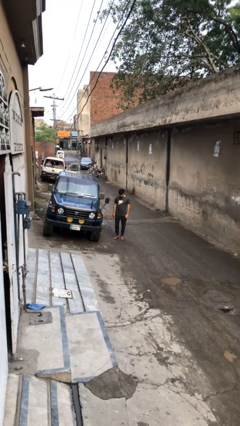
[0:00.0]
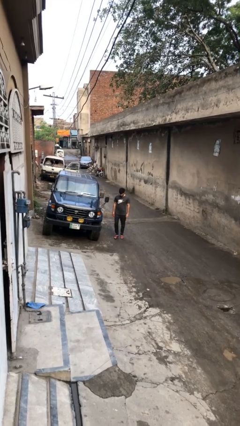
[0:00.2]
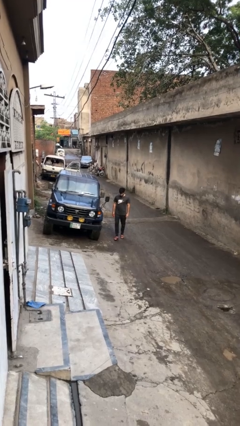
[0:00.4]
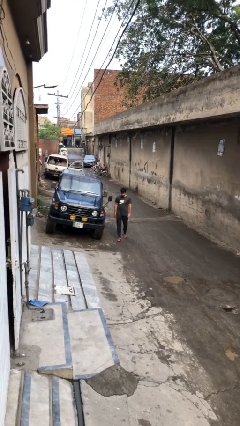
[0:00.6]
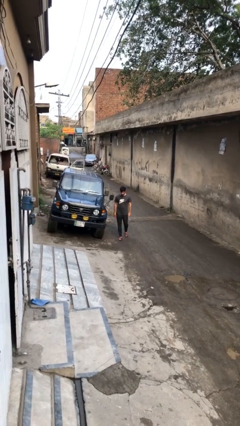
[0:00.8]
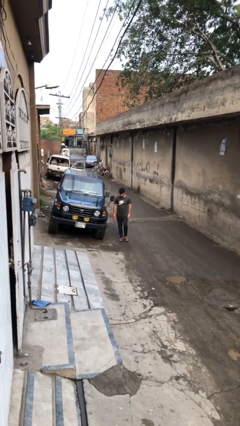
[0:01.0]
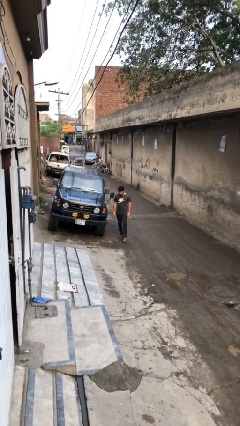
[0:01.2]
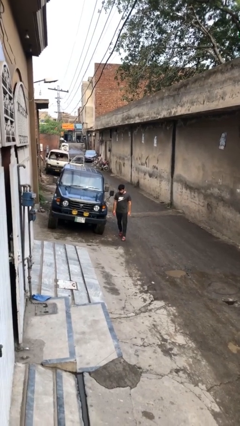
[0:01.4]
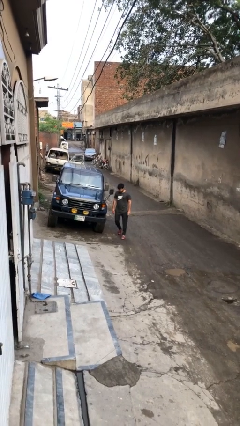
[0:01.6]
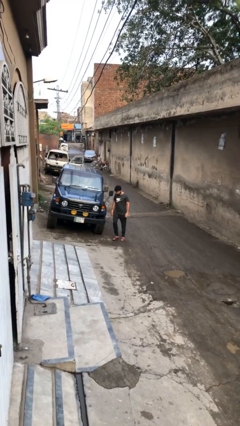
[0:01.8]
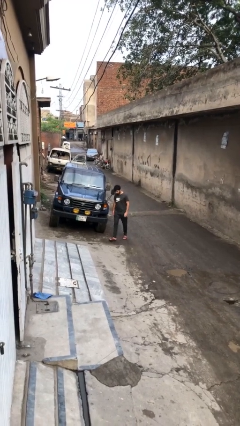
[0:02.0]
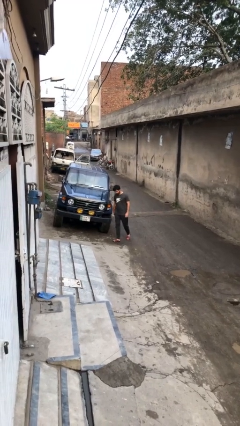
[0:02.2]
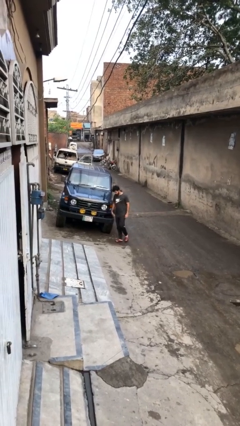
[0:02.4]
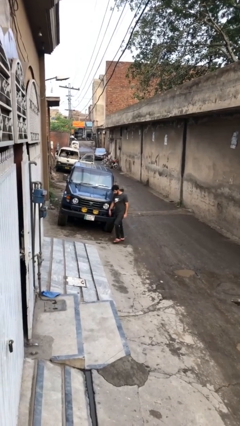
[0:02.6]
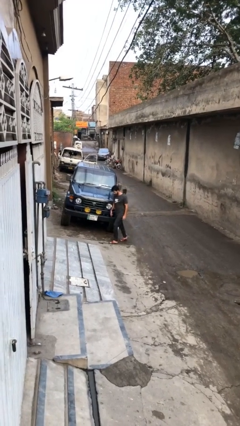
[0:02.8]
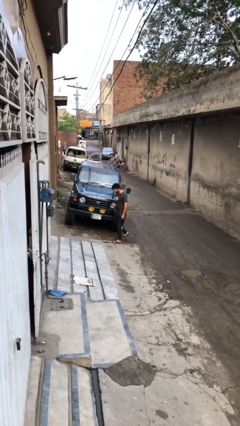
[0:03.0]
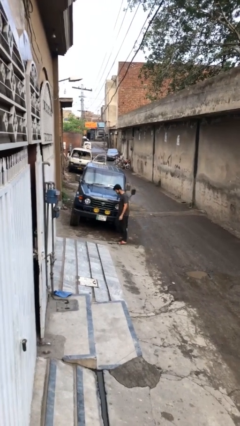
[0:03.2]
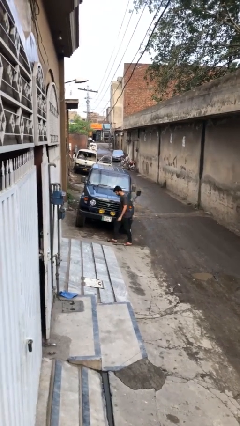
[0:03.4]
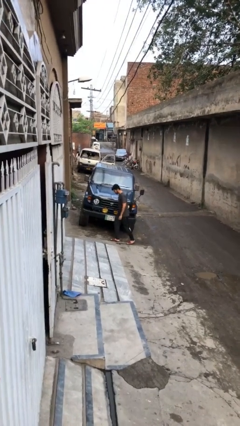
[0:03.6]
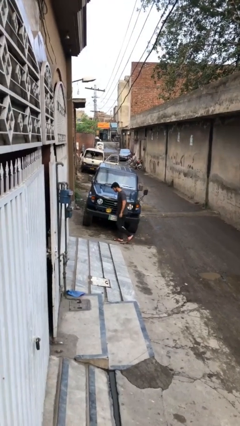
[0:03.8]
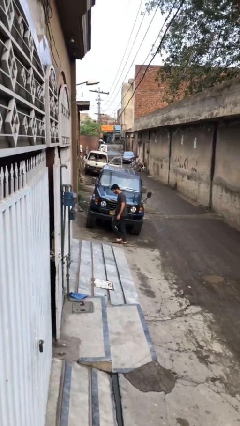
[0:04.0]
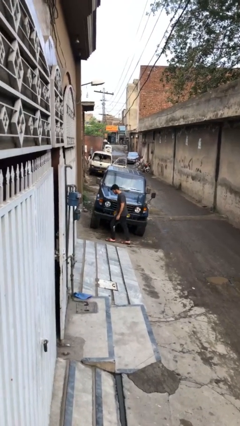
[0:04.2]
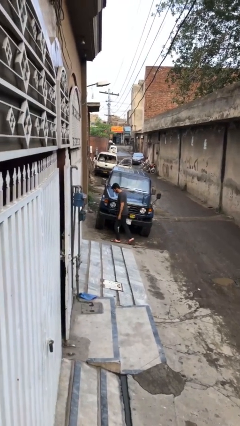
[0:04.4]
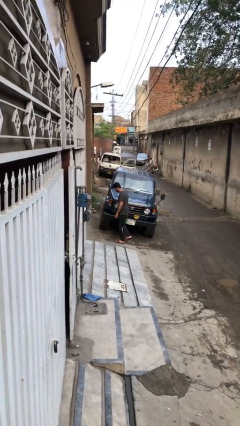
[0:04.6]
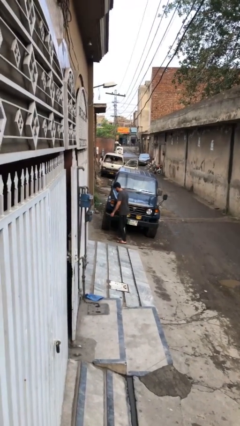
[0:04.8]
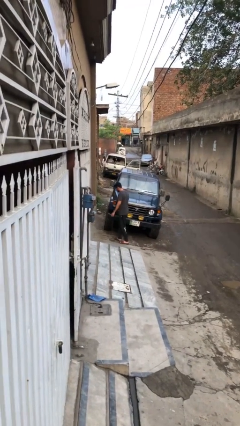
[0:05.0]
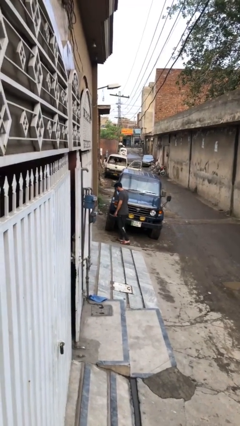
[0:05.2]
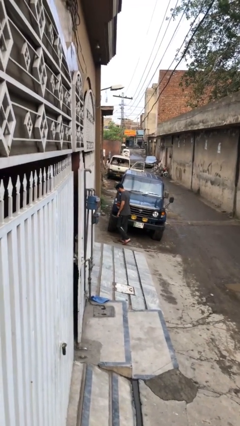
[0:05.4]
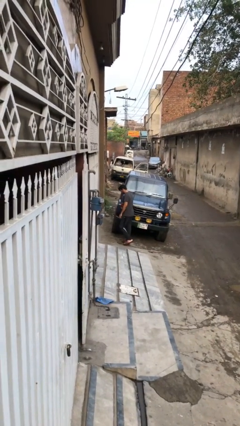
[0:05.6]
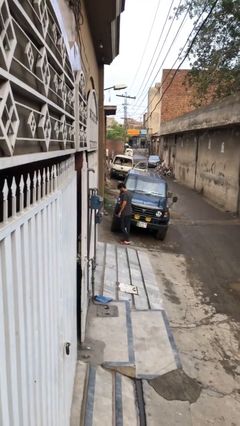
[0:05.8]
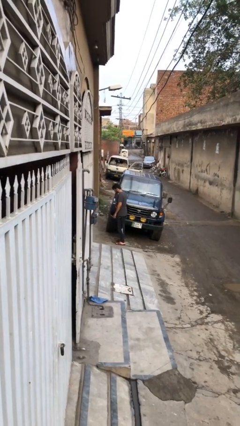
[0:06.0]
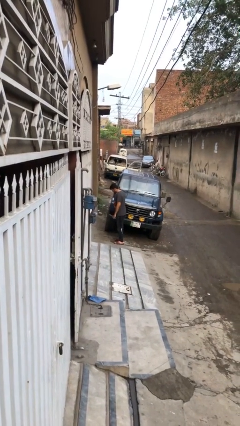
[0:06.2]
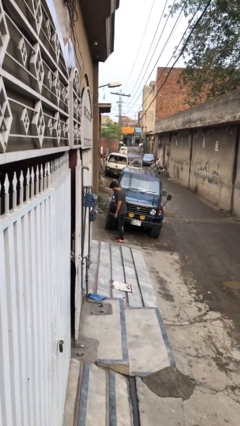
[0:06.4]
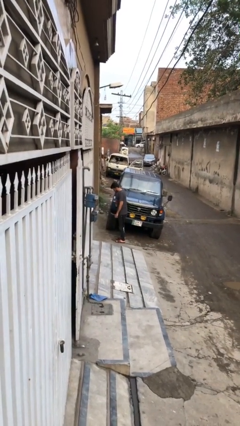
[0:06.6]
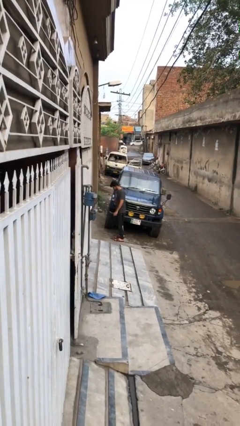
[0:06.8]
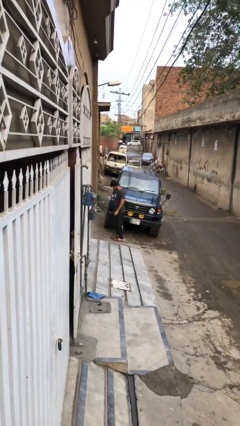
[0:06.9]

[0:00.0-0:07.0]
person walks around car

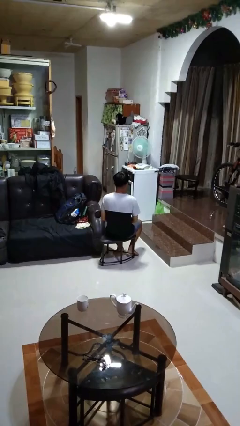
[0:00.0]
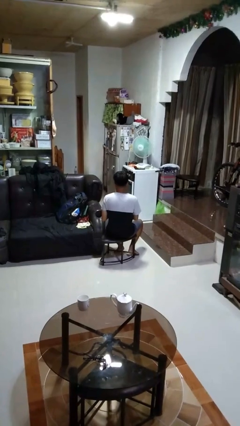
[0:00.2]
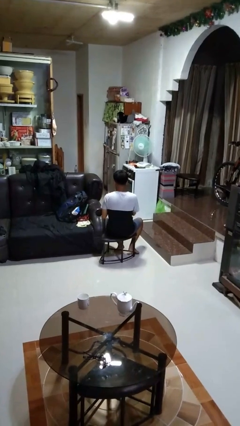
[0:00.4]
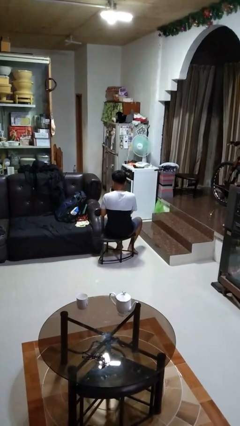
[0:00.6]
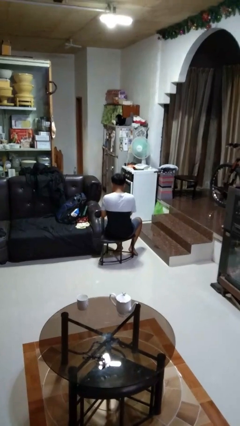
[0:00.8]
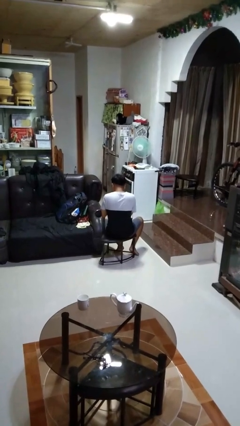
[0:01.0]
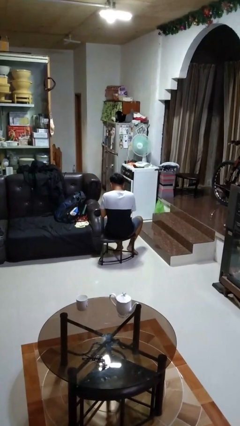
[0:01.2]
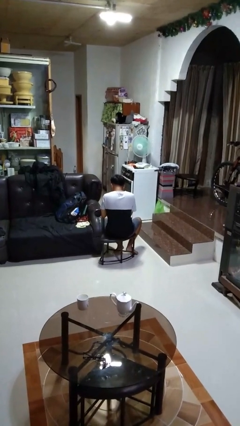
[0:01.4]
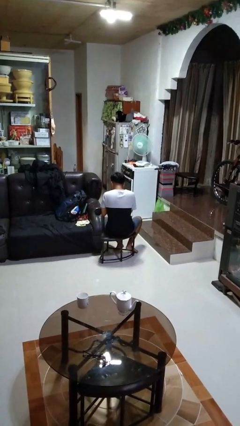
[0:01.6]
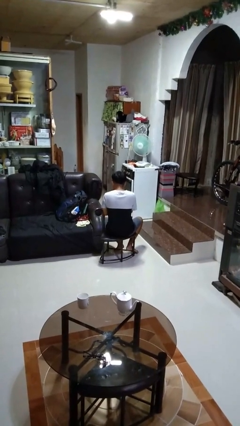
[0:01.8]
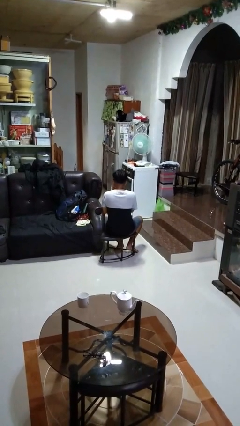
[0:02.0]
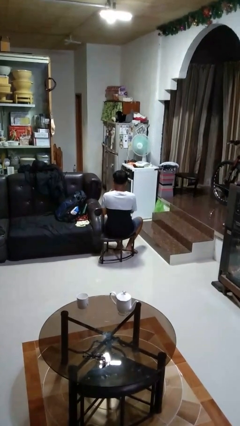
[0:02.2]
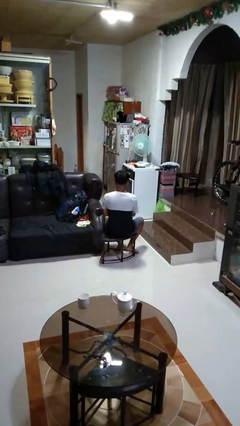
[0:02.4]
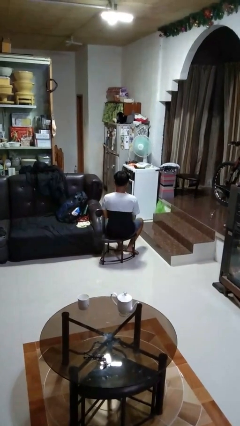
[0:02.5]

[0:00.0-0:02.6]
person blows nose

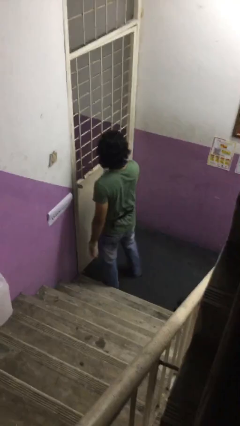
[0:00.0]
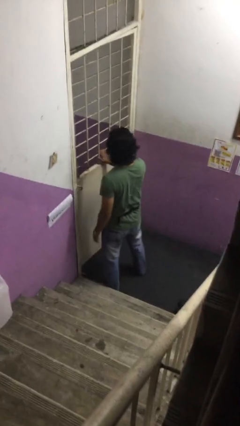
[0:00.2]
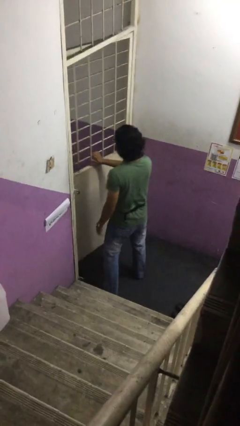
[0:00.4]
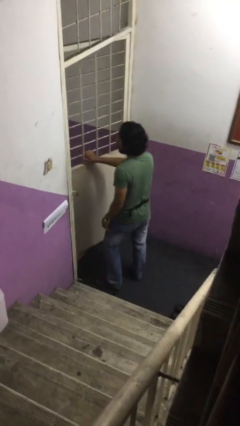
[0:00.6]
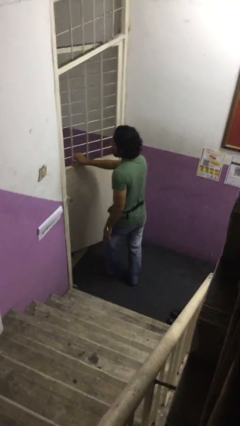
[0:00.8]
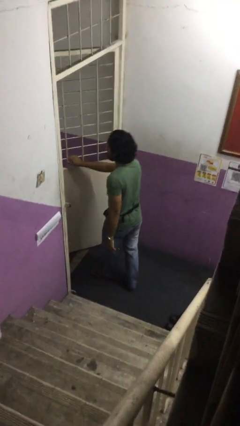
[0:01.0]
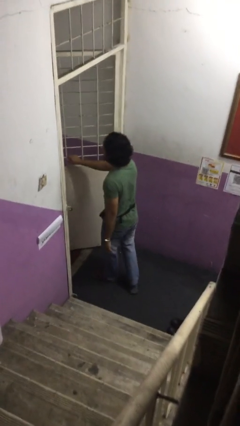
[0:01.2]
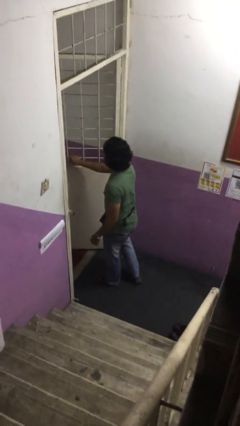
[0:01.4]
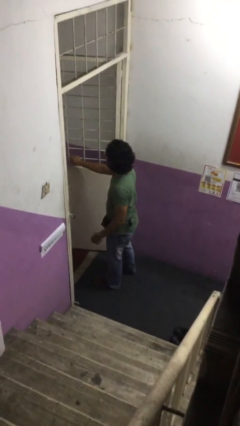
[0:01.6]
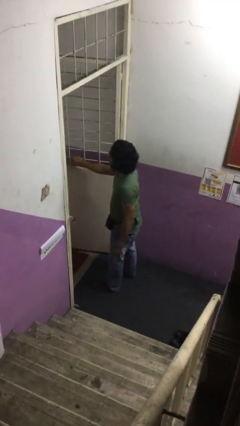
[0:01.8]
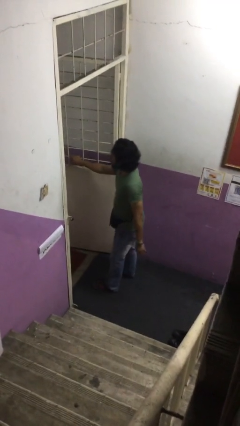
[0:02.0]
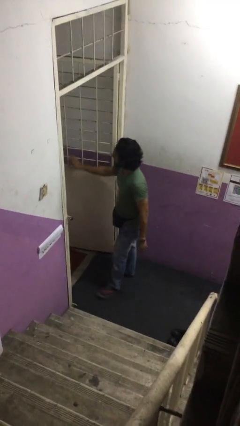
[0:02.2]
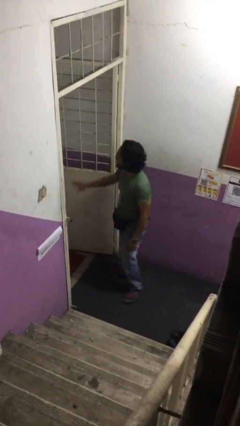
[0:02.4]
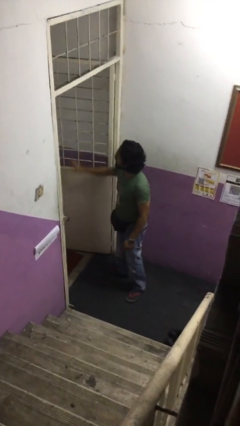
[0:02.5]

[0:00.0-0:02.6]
person opens facility door

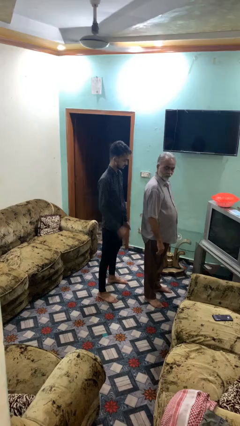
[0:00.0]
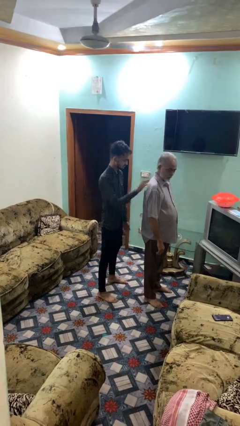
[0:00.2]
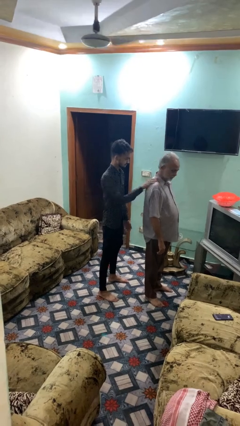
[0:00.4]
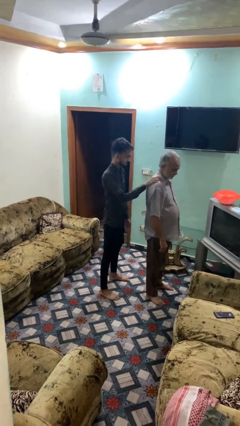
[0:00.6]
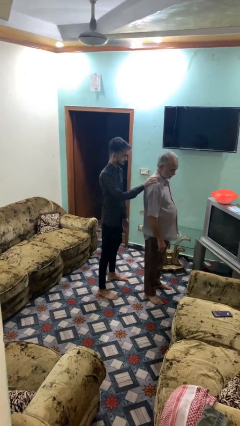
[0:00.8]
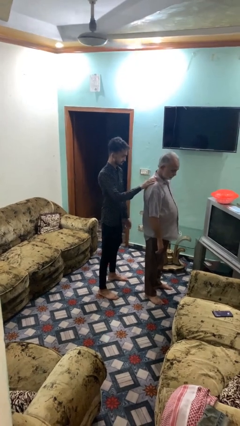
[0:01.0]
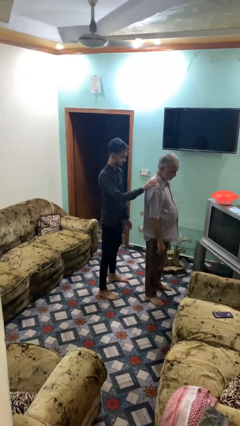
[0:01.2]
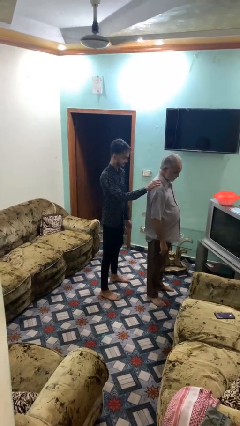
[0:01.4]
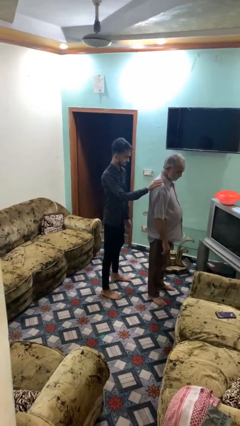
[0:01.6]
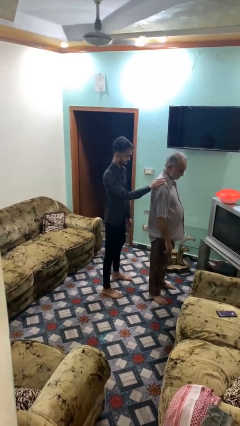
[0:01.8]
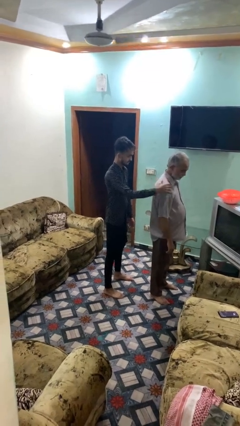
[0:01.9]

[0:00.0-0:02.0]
person grabs person by shoulder

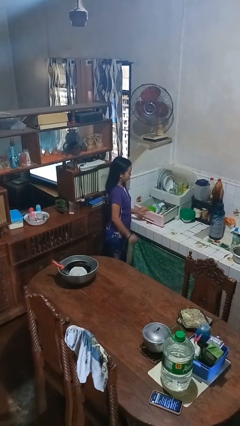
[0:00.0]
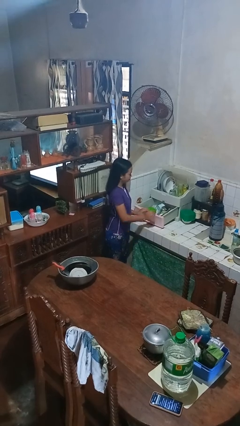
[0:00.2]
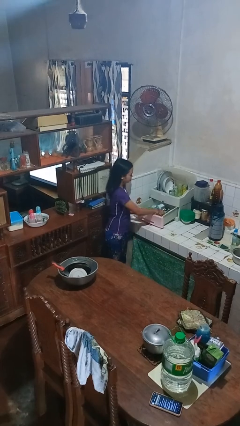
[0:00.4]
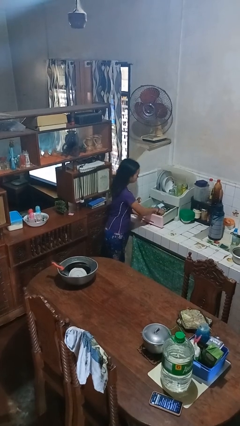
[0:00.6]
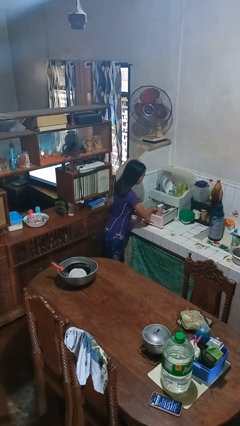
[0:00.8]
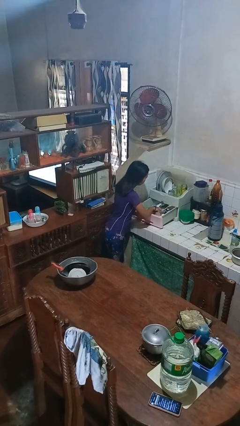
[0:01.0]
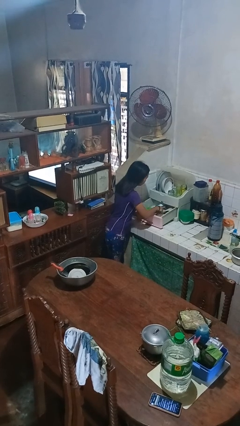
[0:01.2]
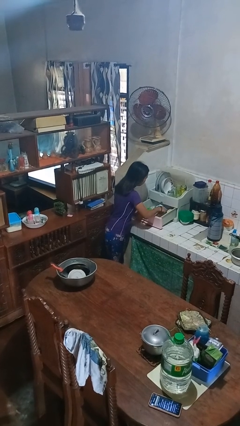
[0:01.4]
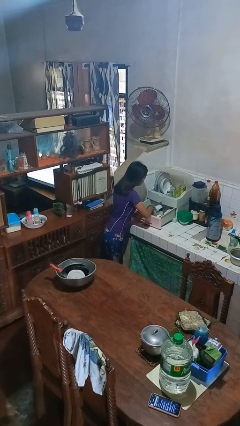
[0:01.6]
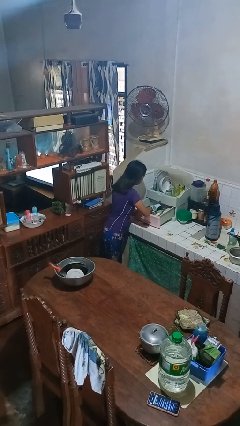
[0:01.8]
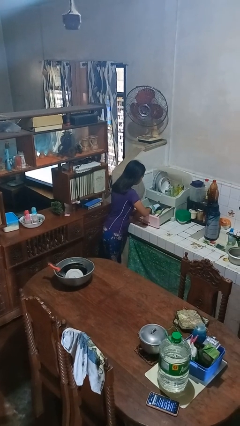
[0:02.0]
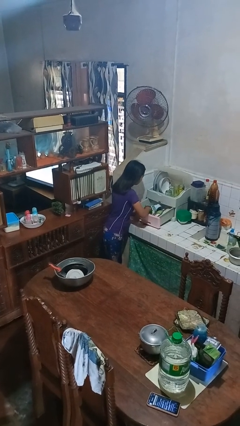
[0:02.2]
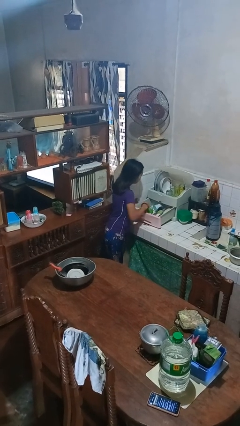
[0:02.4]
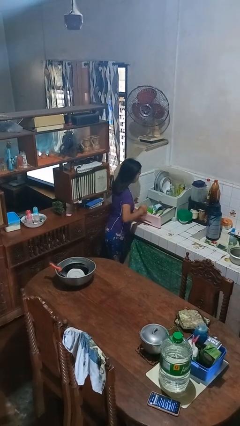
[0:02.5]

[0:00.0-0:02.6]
person searches in kitchen drawer

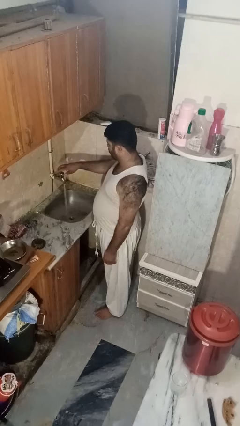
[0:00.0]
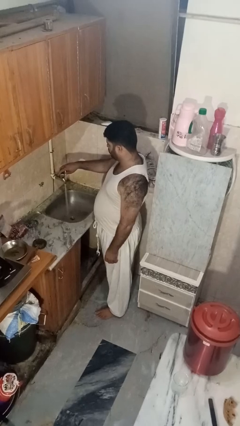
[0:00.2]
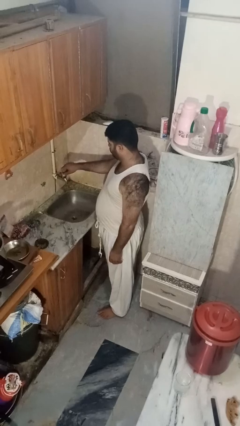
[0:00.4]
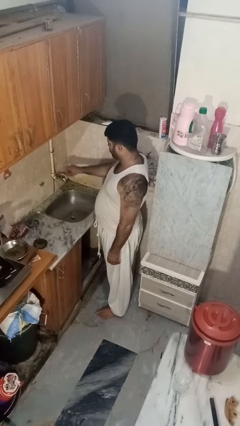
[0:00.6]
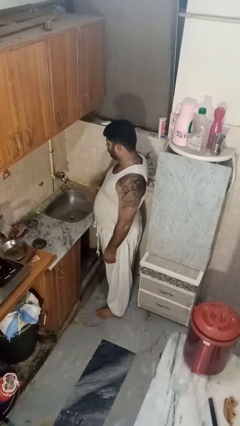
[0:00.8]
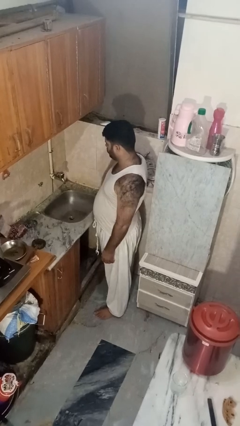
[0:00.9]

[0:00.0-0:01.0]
person turns off faucet
